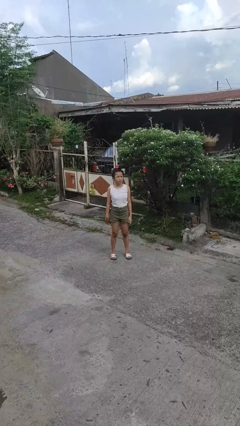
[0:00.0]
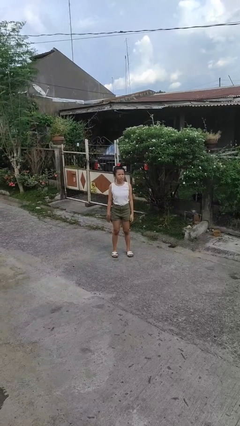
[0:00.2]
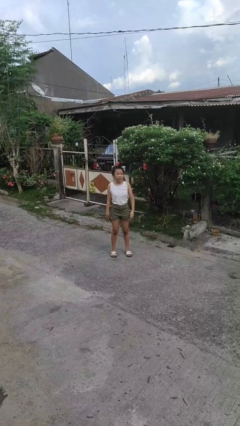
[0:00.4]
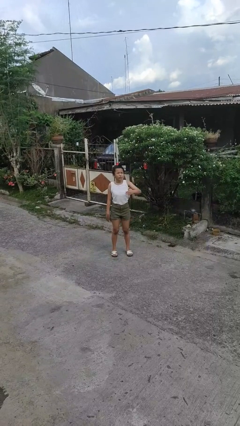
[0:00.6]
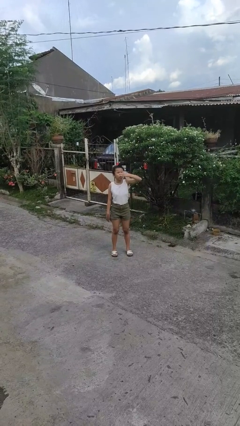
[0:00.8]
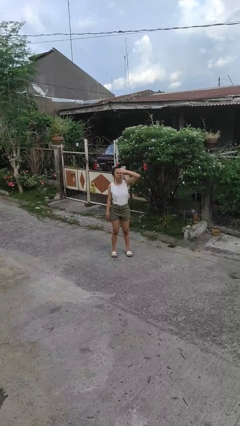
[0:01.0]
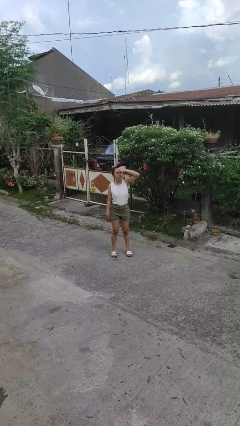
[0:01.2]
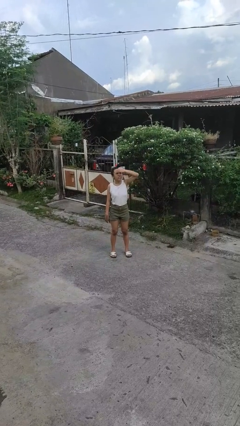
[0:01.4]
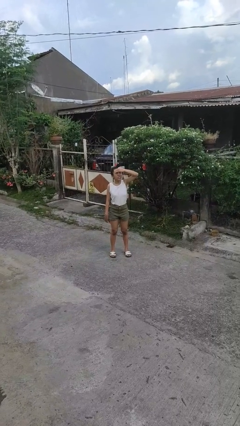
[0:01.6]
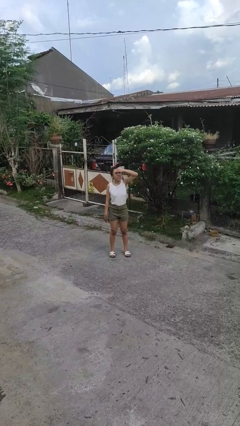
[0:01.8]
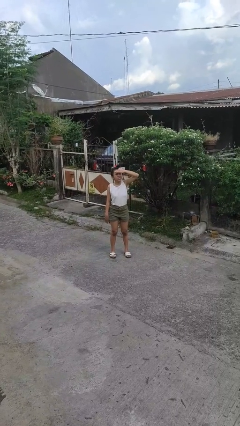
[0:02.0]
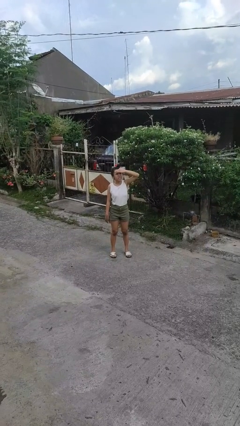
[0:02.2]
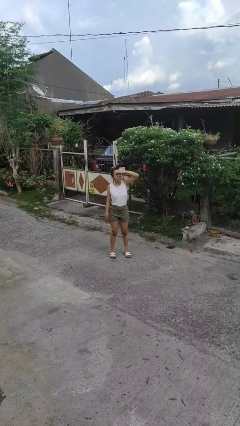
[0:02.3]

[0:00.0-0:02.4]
person shades eyes

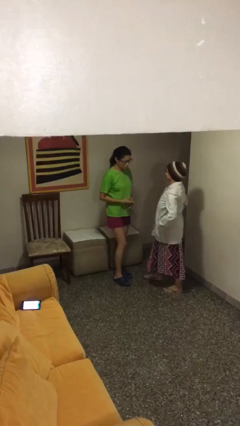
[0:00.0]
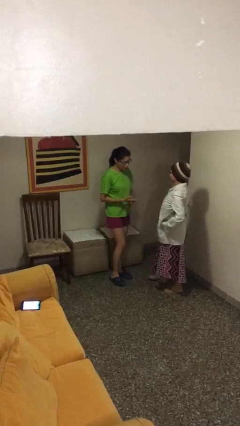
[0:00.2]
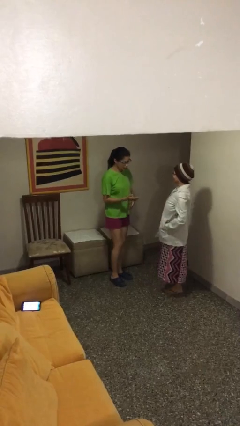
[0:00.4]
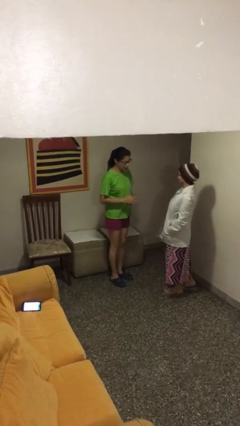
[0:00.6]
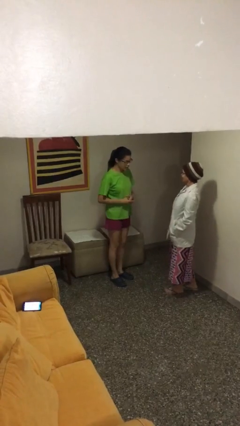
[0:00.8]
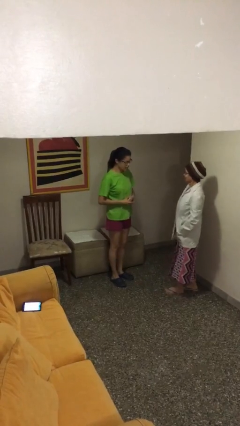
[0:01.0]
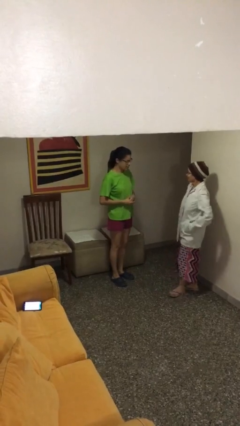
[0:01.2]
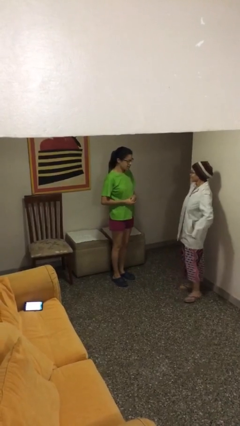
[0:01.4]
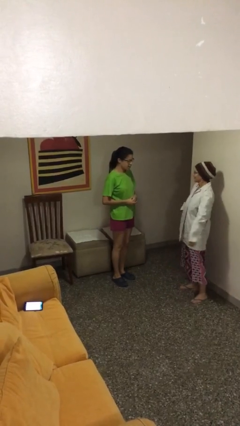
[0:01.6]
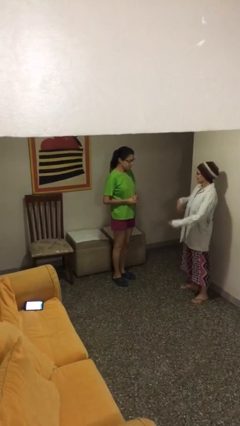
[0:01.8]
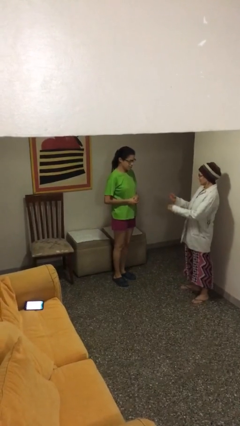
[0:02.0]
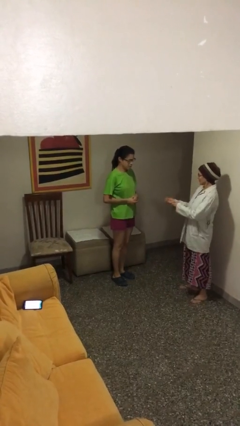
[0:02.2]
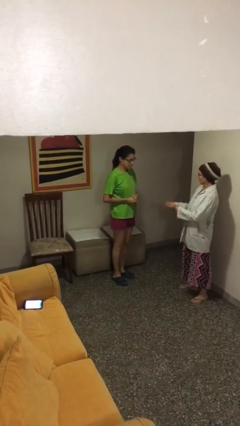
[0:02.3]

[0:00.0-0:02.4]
person talks to person

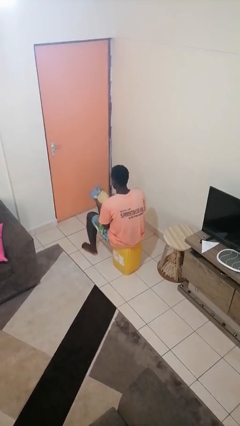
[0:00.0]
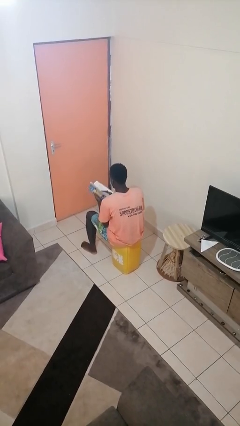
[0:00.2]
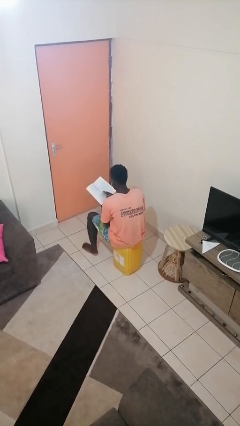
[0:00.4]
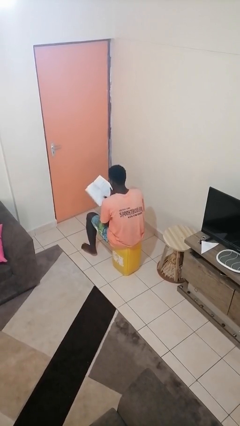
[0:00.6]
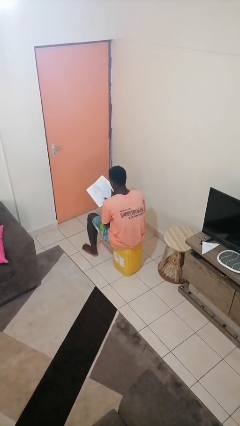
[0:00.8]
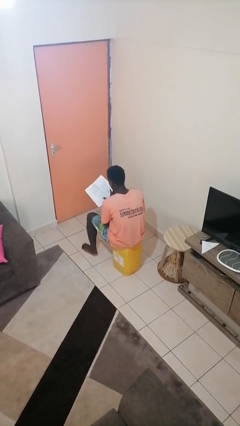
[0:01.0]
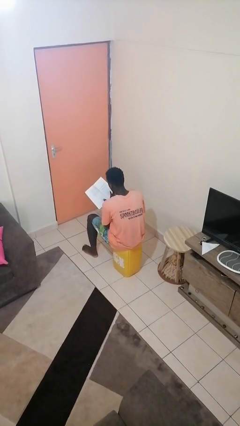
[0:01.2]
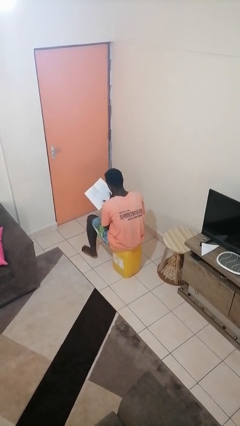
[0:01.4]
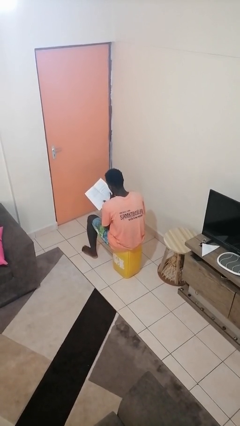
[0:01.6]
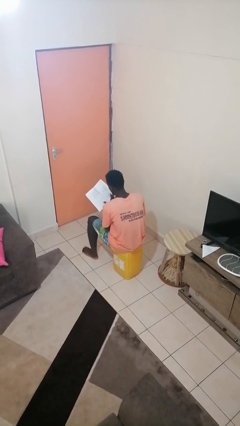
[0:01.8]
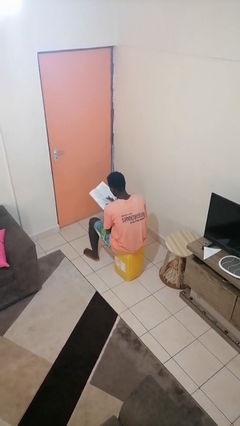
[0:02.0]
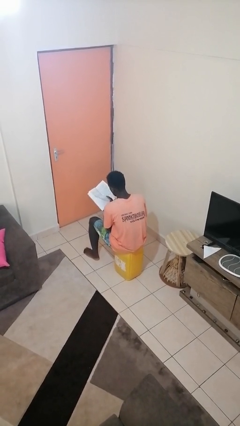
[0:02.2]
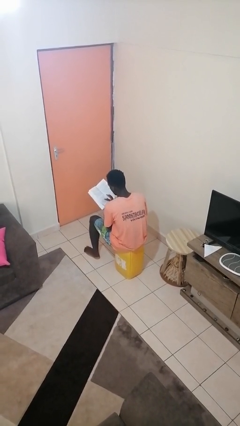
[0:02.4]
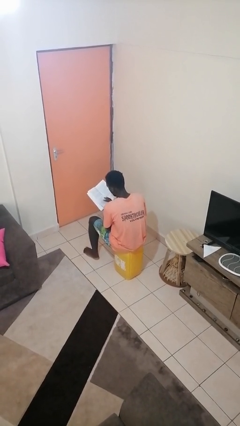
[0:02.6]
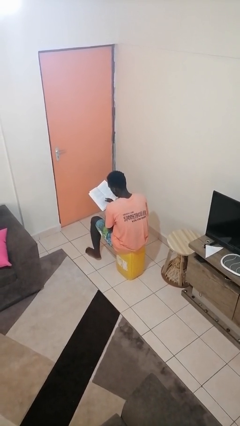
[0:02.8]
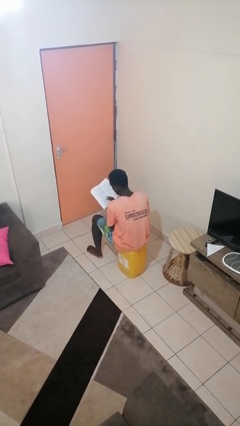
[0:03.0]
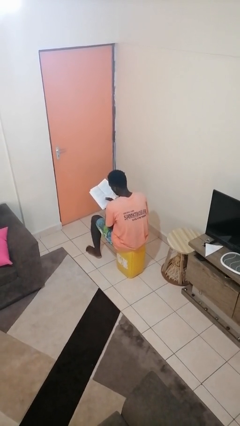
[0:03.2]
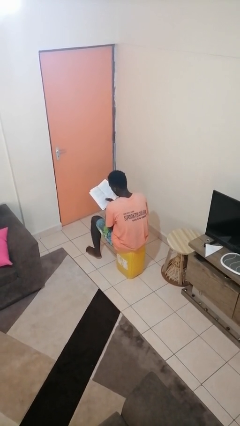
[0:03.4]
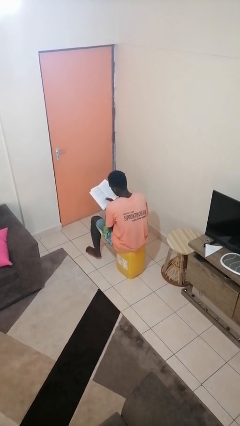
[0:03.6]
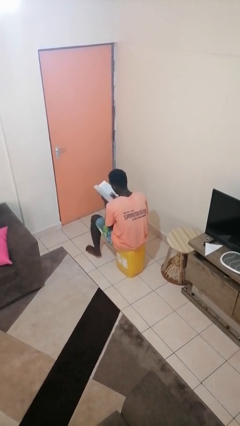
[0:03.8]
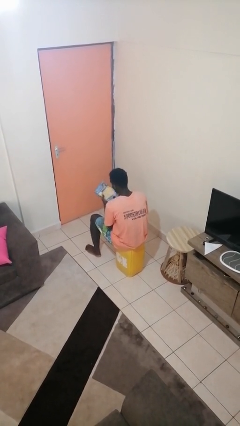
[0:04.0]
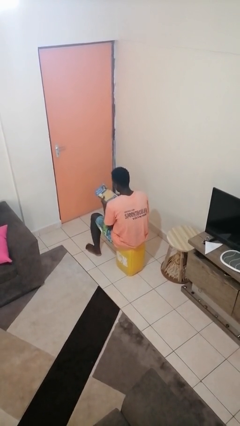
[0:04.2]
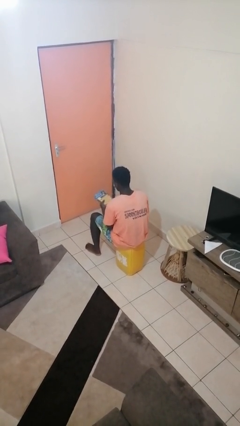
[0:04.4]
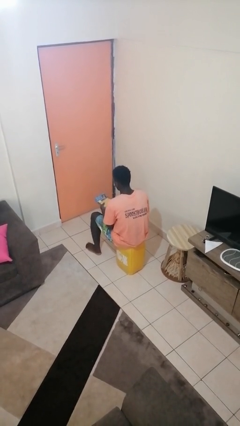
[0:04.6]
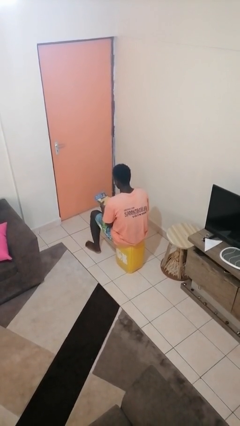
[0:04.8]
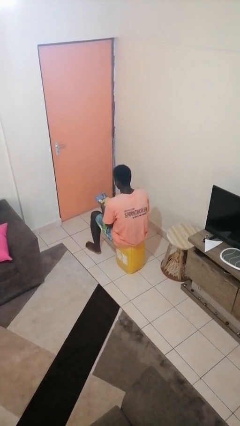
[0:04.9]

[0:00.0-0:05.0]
person reads book

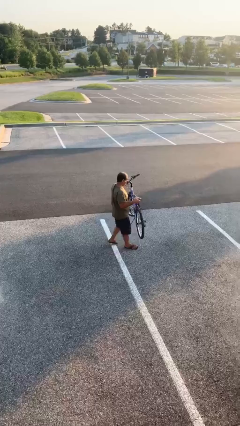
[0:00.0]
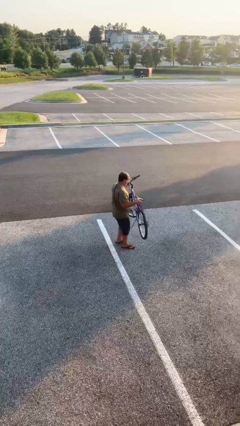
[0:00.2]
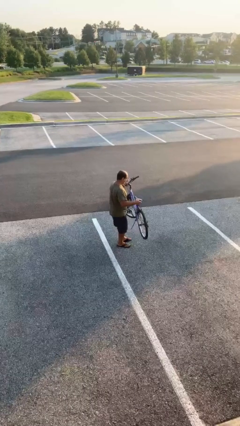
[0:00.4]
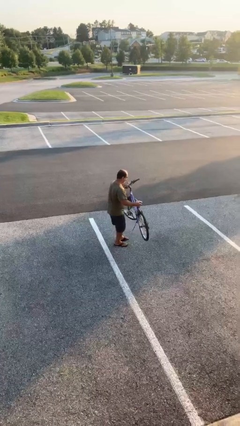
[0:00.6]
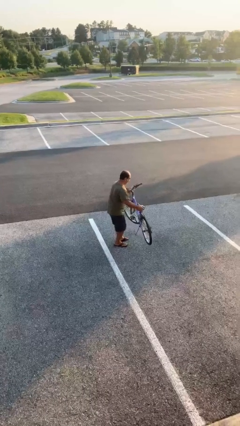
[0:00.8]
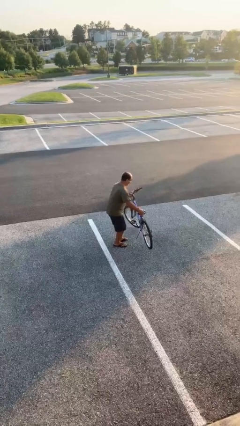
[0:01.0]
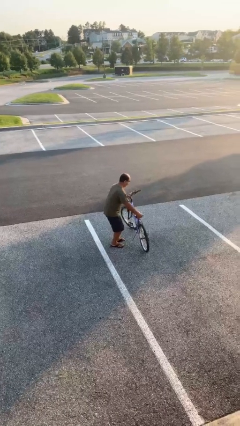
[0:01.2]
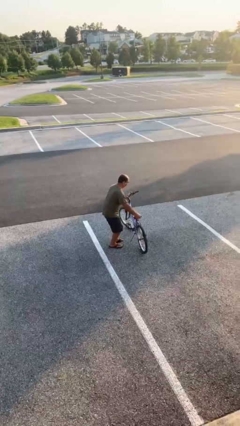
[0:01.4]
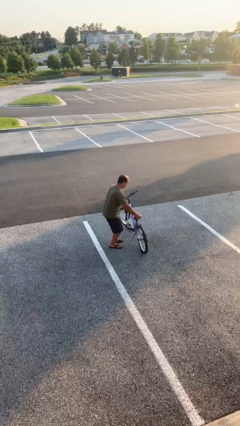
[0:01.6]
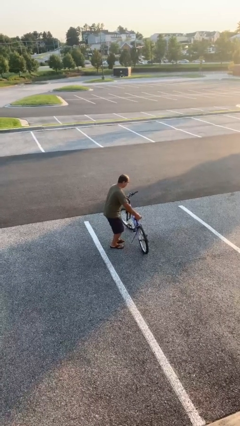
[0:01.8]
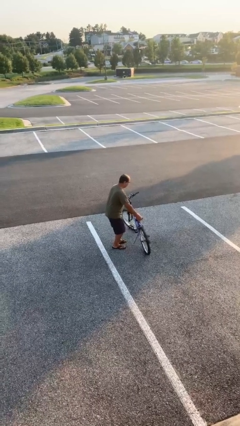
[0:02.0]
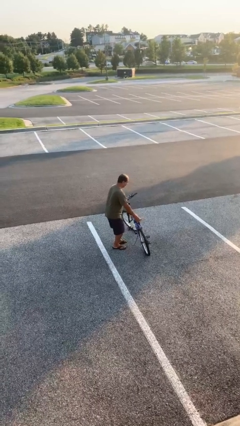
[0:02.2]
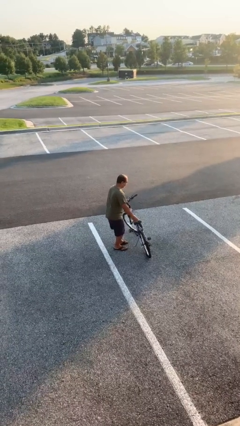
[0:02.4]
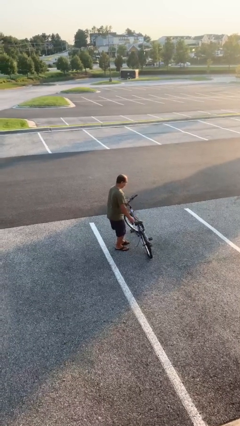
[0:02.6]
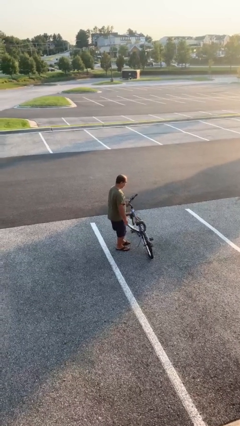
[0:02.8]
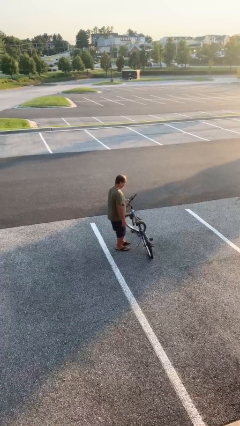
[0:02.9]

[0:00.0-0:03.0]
person puts down object on floor

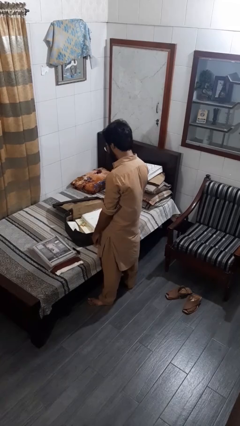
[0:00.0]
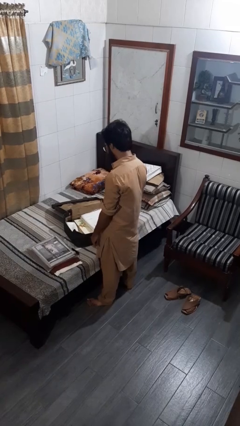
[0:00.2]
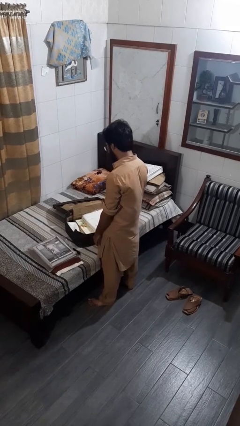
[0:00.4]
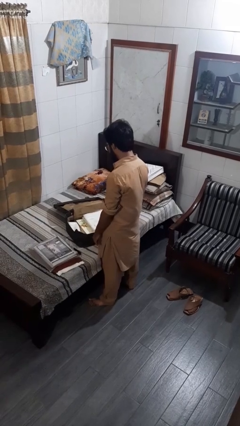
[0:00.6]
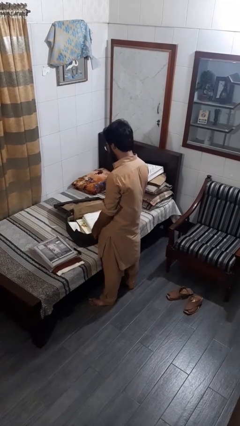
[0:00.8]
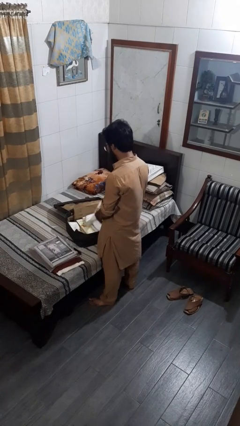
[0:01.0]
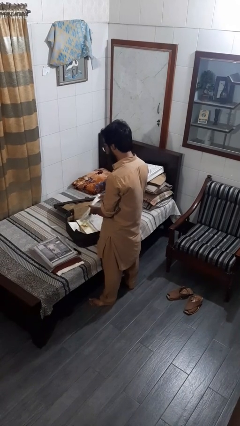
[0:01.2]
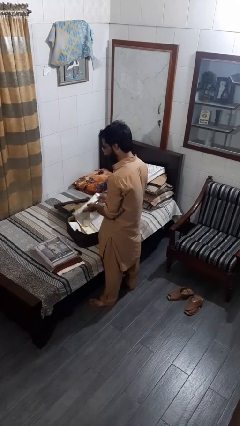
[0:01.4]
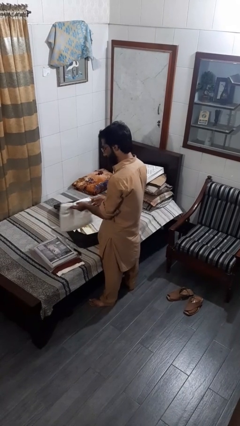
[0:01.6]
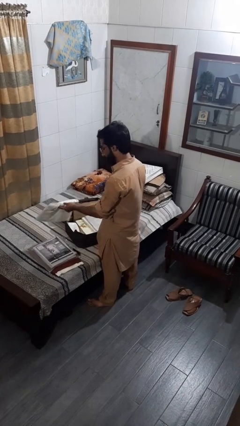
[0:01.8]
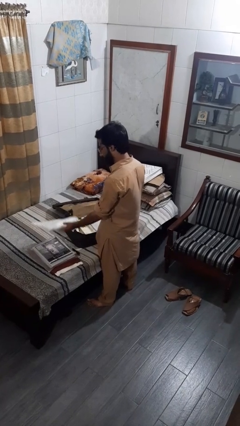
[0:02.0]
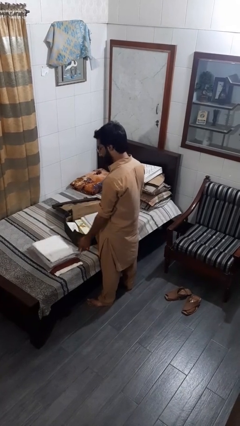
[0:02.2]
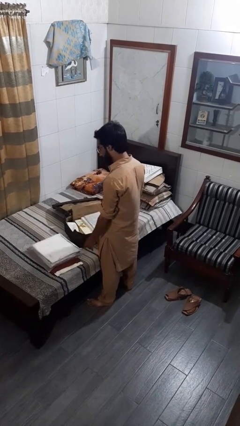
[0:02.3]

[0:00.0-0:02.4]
person unloads clothes from suitcase

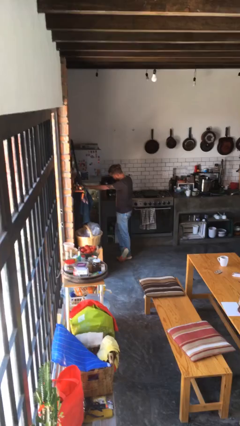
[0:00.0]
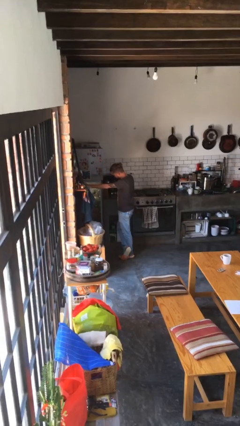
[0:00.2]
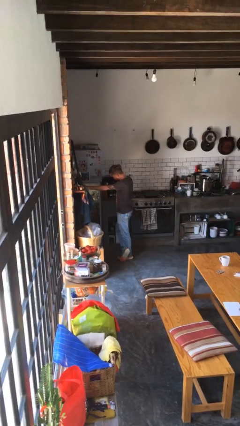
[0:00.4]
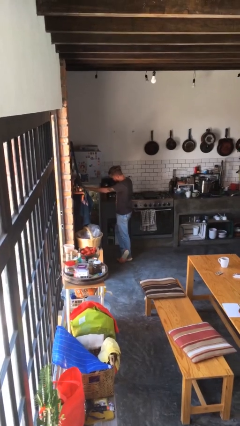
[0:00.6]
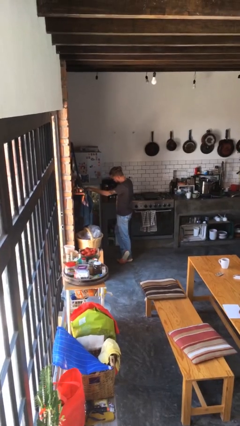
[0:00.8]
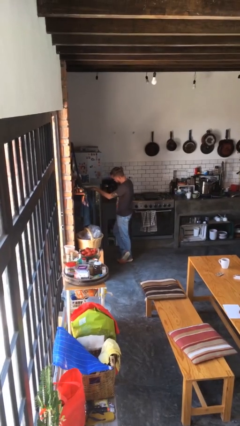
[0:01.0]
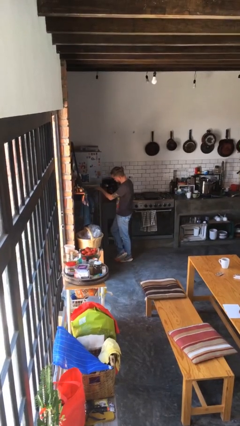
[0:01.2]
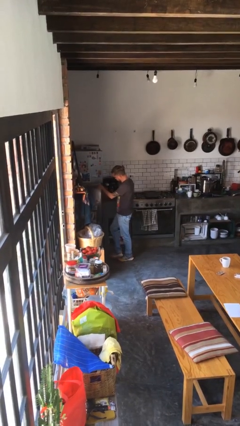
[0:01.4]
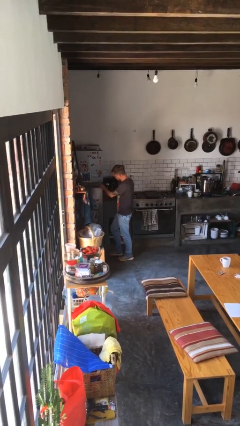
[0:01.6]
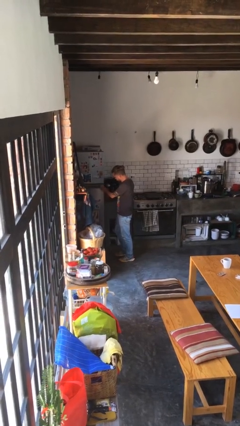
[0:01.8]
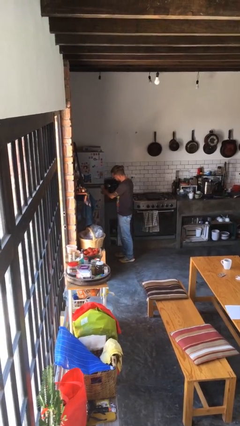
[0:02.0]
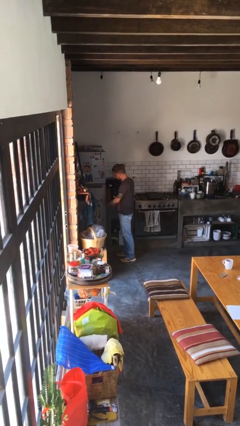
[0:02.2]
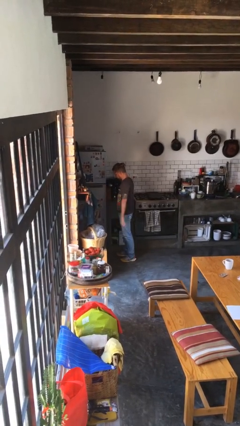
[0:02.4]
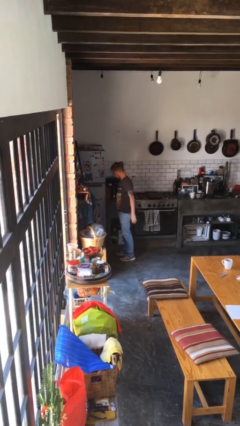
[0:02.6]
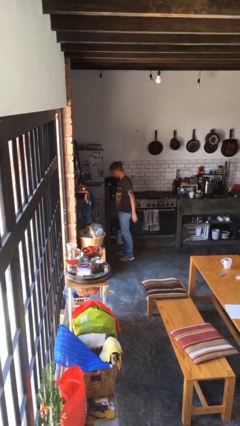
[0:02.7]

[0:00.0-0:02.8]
person closes refrigerator
